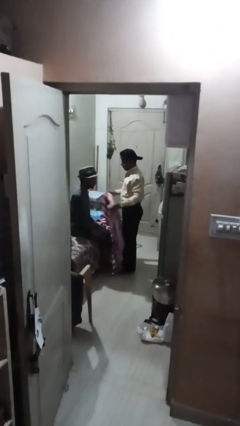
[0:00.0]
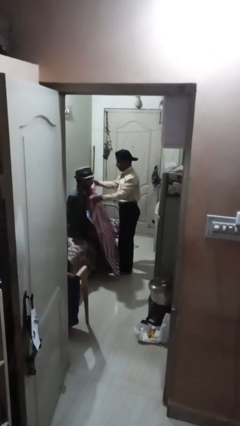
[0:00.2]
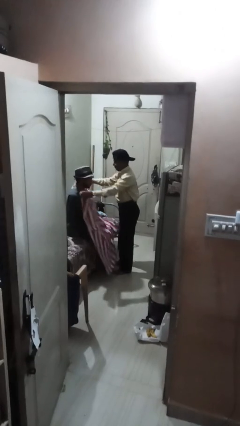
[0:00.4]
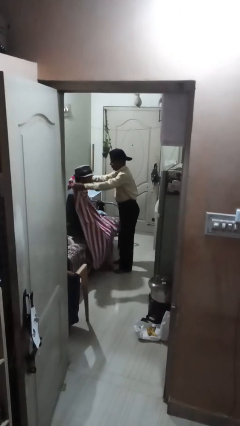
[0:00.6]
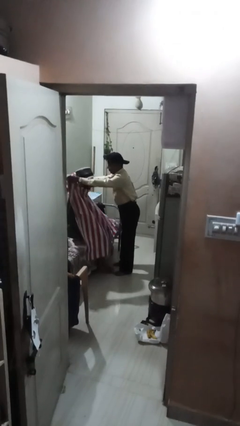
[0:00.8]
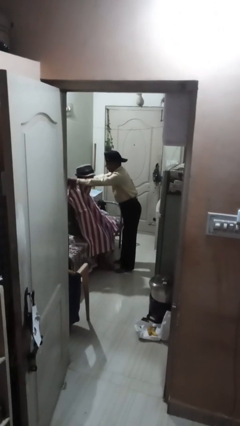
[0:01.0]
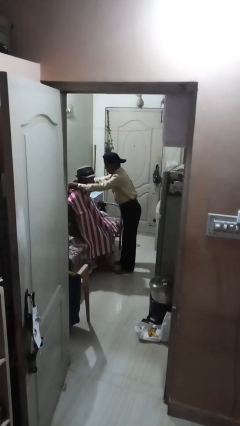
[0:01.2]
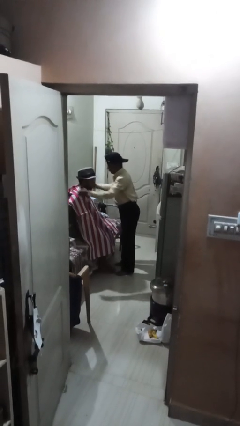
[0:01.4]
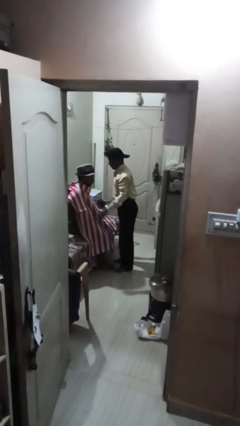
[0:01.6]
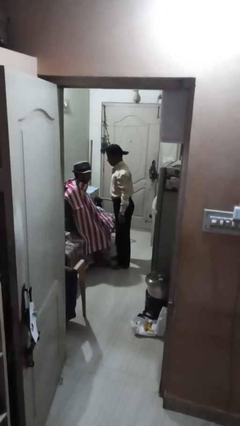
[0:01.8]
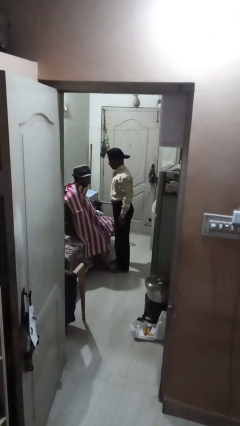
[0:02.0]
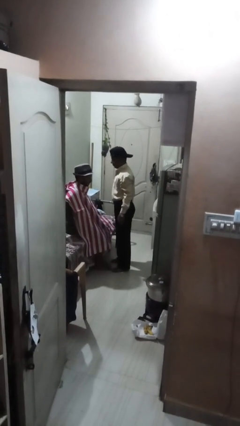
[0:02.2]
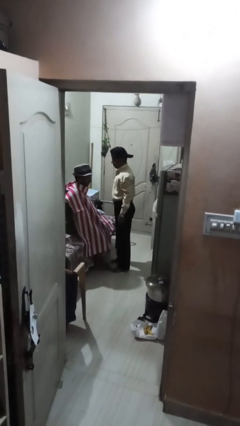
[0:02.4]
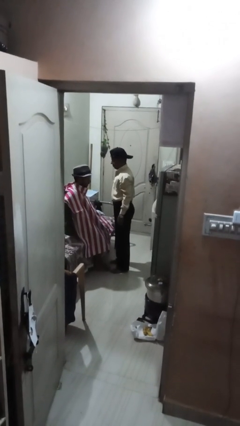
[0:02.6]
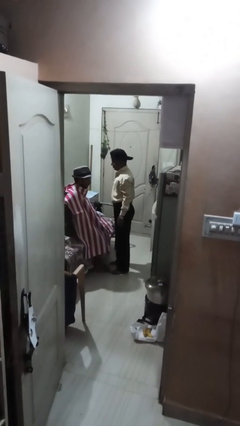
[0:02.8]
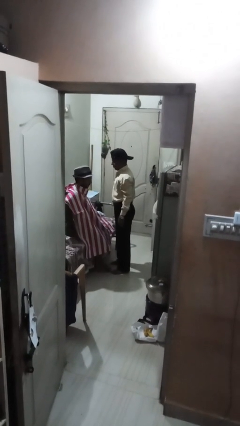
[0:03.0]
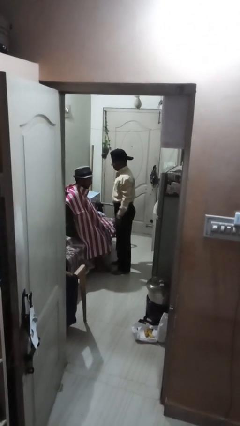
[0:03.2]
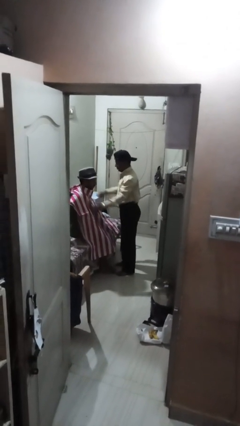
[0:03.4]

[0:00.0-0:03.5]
person covers friend with blanket

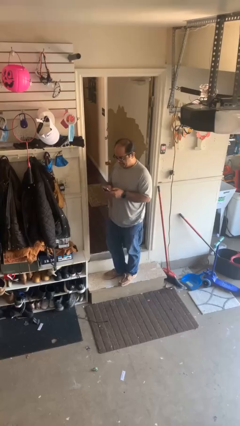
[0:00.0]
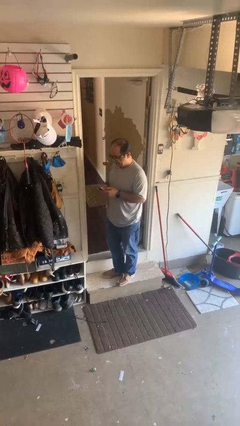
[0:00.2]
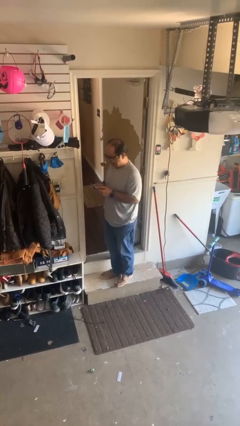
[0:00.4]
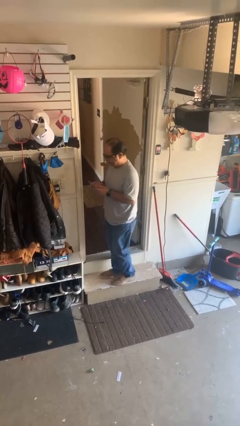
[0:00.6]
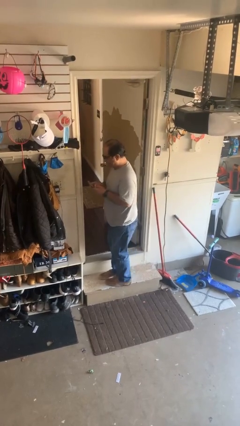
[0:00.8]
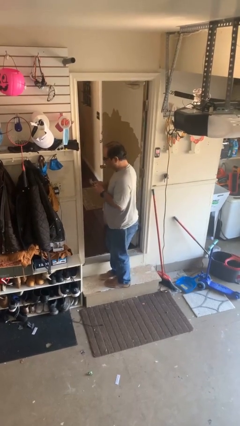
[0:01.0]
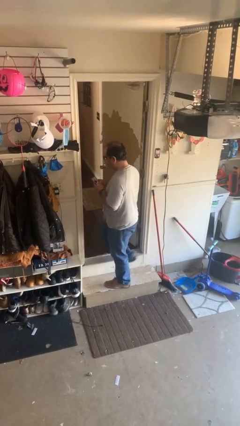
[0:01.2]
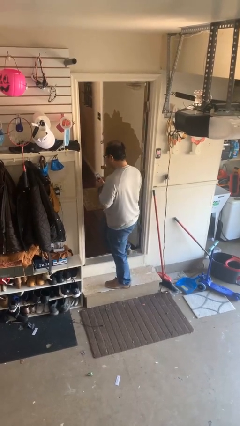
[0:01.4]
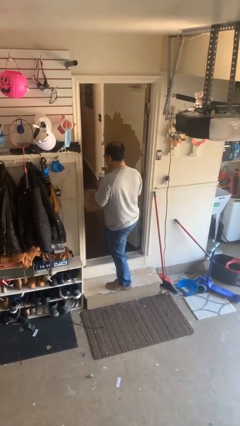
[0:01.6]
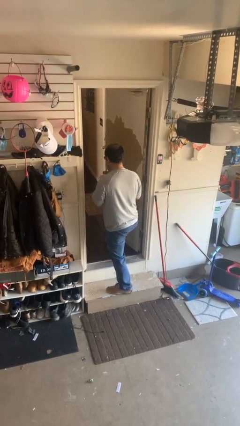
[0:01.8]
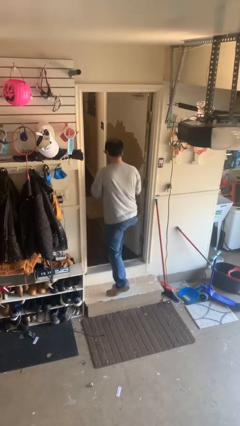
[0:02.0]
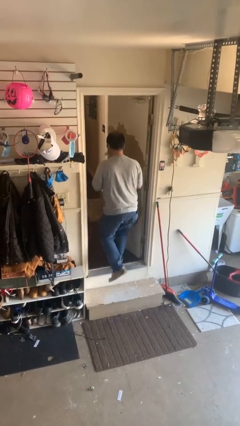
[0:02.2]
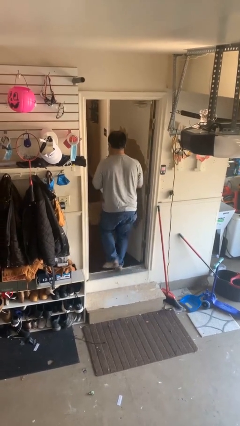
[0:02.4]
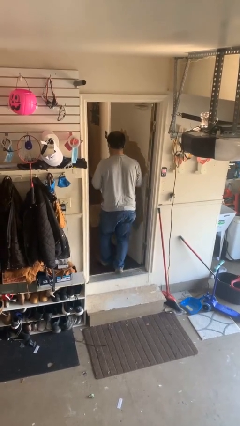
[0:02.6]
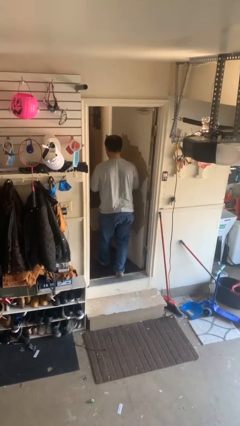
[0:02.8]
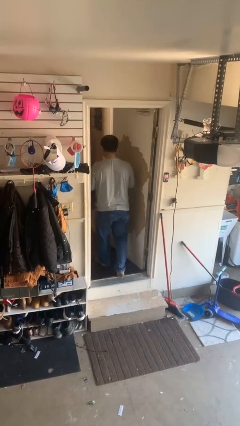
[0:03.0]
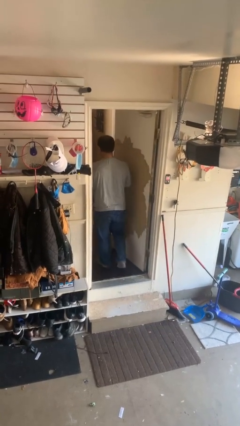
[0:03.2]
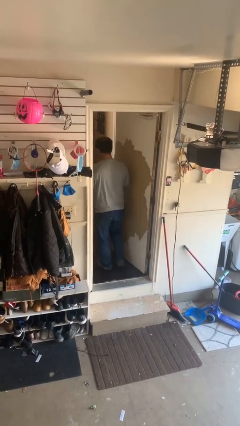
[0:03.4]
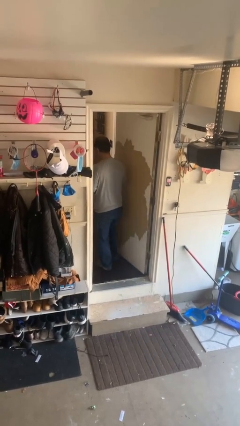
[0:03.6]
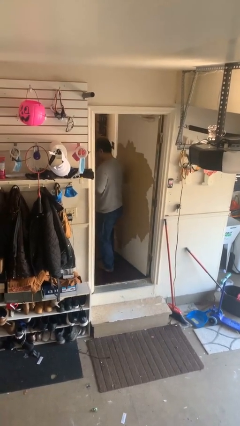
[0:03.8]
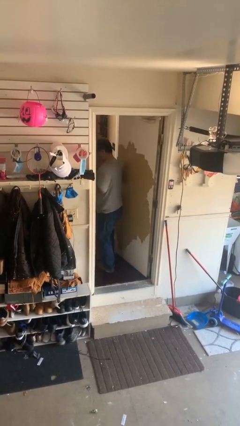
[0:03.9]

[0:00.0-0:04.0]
person exits scene through structure

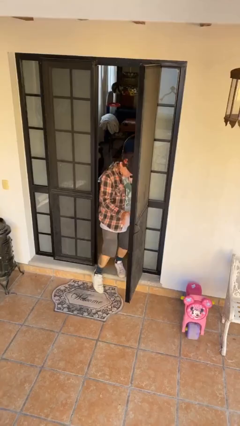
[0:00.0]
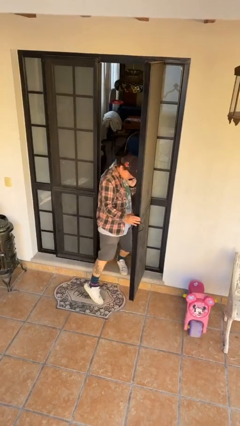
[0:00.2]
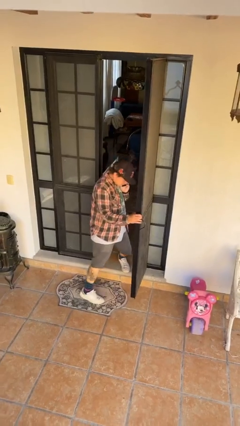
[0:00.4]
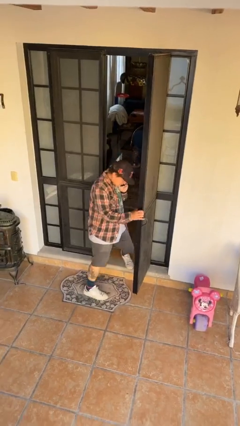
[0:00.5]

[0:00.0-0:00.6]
person enters scene through structure

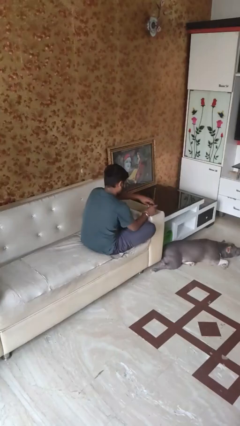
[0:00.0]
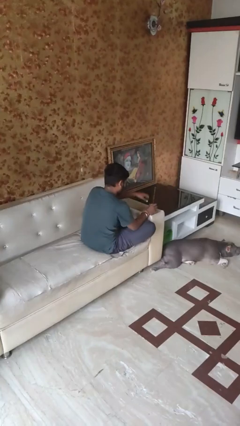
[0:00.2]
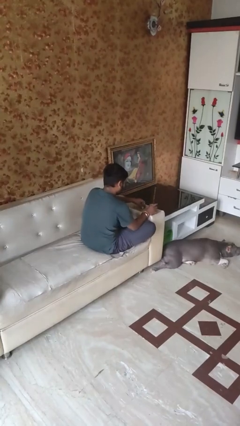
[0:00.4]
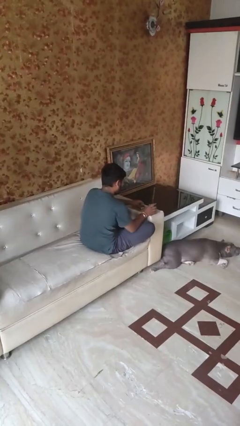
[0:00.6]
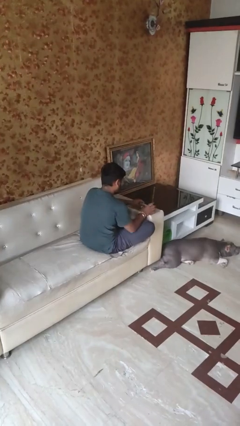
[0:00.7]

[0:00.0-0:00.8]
person opens jar

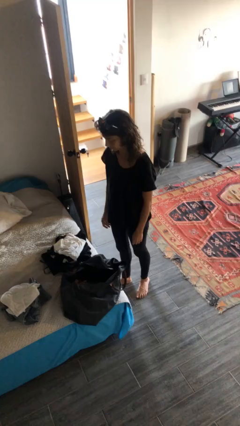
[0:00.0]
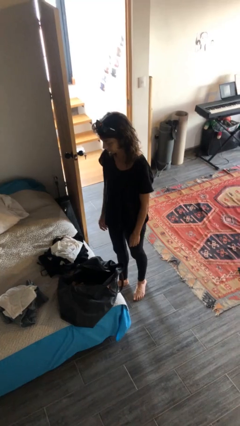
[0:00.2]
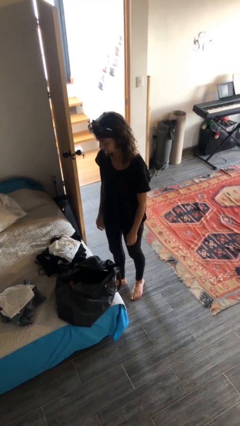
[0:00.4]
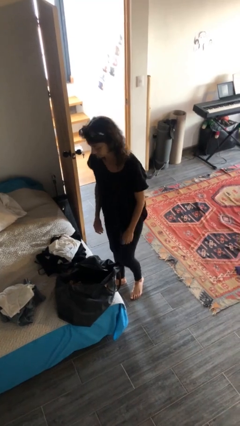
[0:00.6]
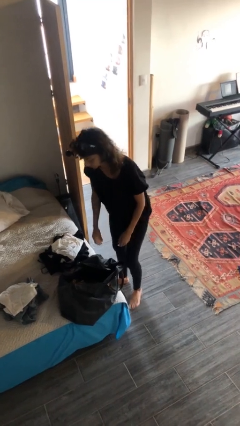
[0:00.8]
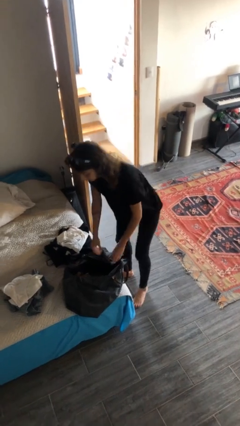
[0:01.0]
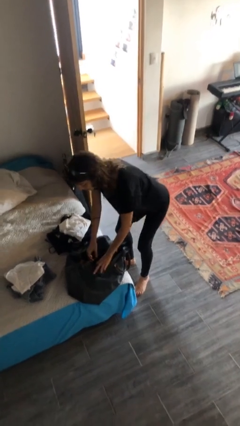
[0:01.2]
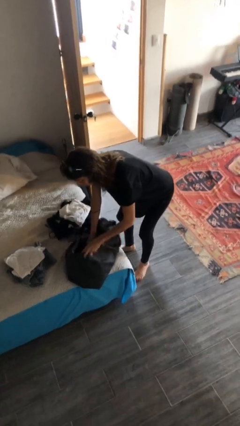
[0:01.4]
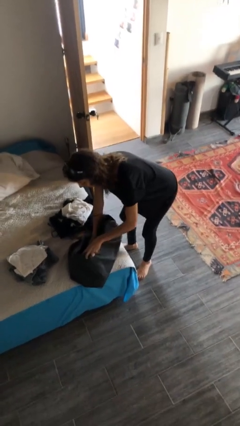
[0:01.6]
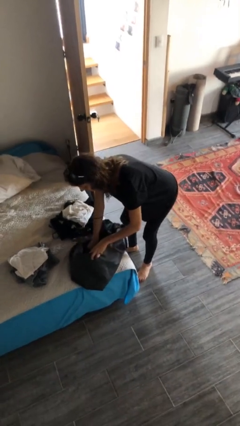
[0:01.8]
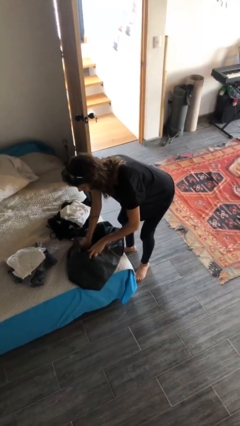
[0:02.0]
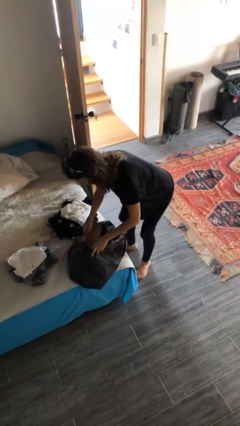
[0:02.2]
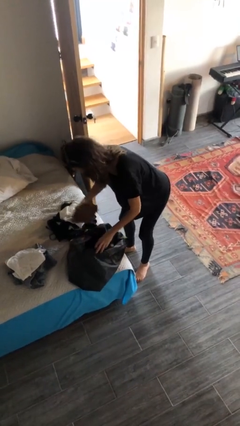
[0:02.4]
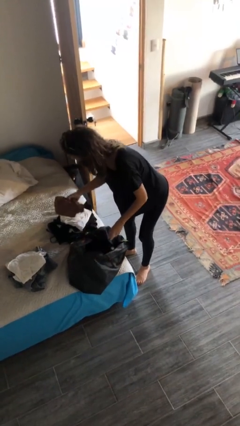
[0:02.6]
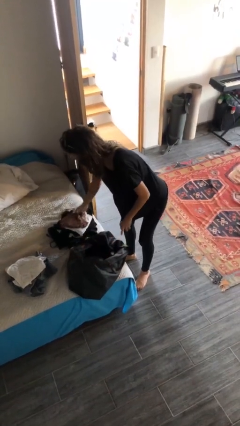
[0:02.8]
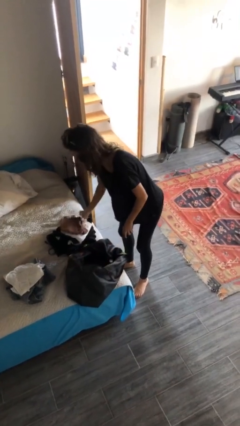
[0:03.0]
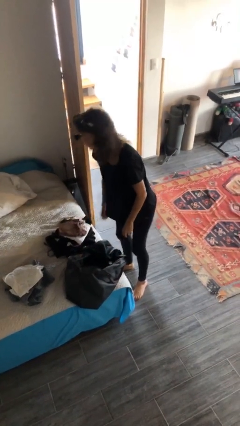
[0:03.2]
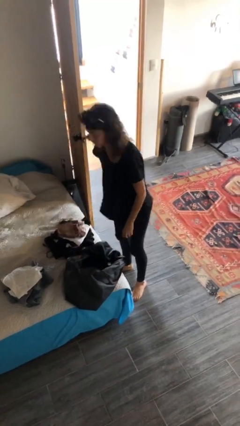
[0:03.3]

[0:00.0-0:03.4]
person unloads clothes from suitcase

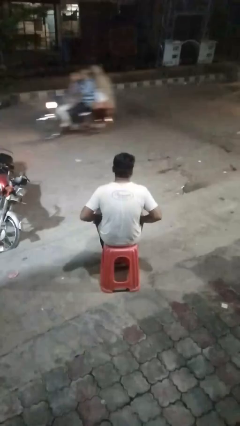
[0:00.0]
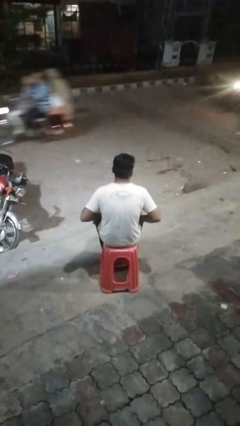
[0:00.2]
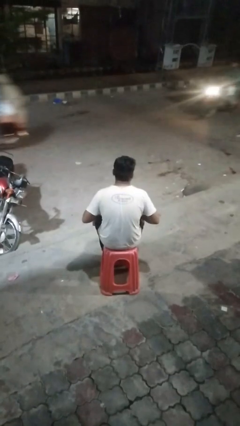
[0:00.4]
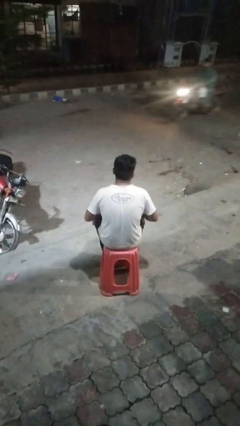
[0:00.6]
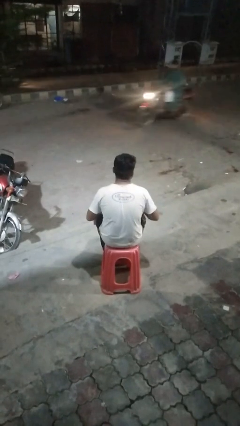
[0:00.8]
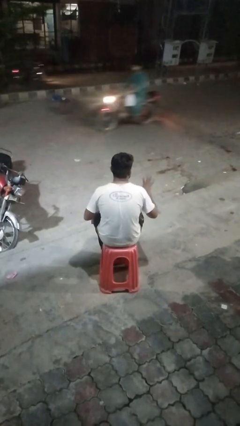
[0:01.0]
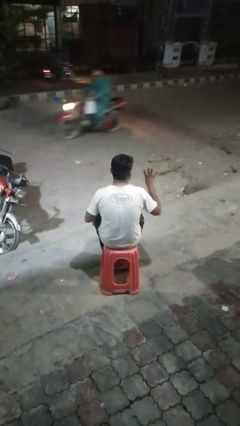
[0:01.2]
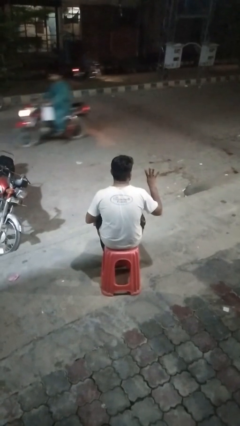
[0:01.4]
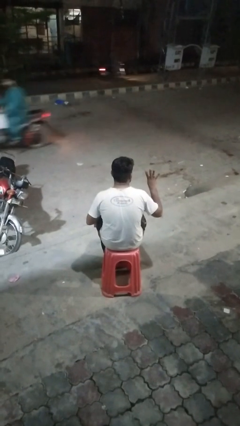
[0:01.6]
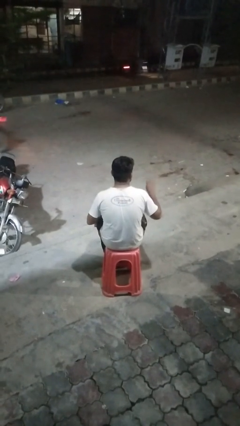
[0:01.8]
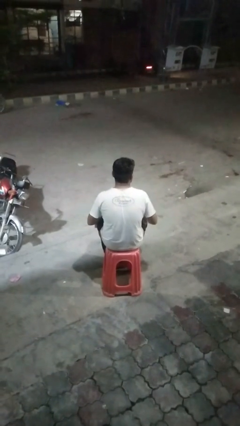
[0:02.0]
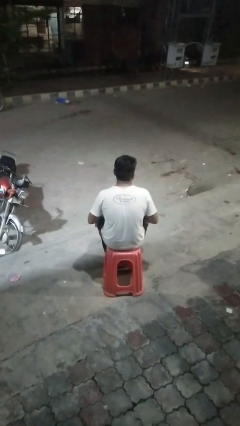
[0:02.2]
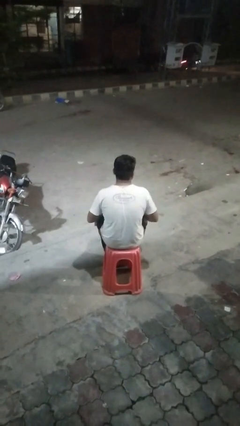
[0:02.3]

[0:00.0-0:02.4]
person gestures number four

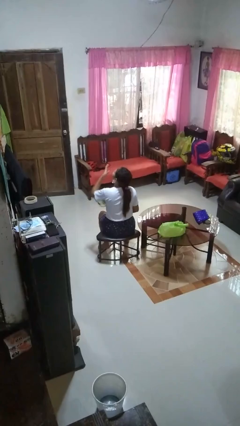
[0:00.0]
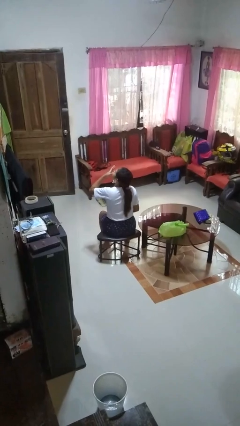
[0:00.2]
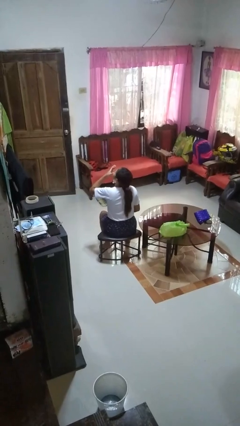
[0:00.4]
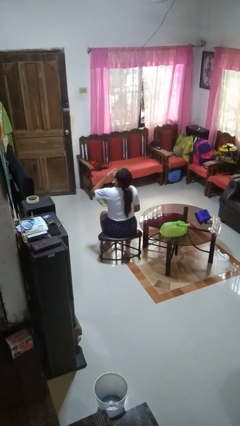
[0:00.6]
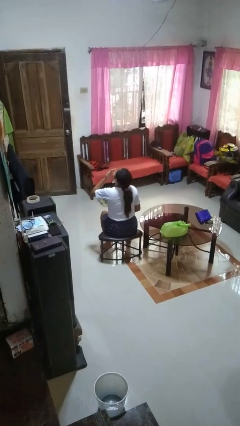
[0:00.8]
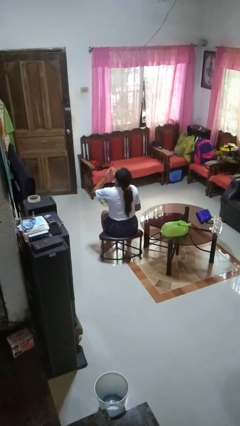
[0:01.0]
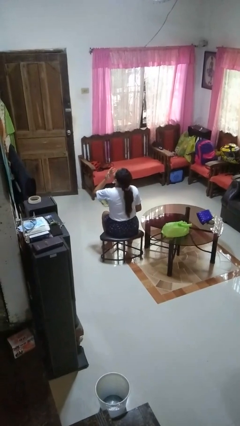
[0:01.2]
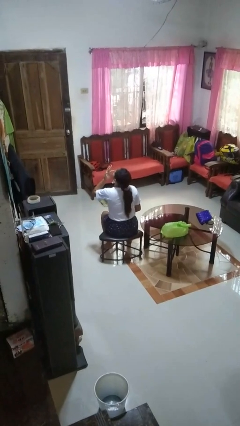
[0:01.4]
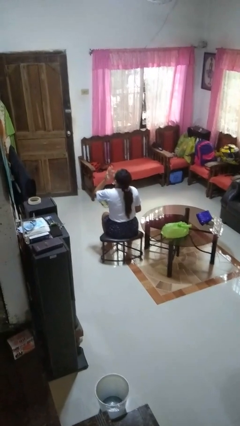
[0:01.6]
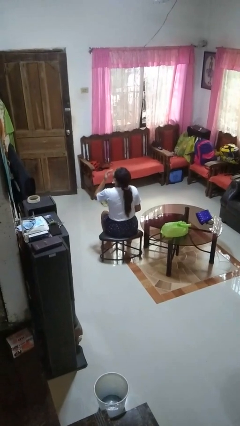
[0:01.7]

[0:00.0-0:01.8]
person licks fingers

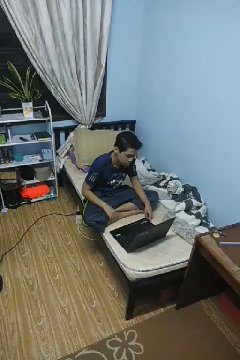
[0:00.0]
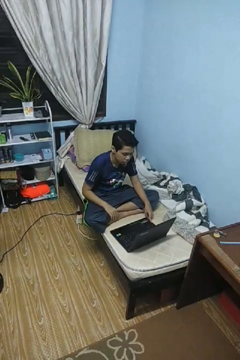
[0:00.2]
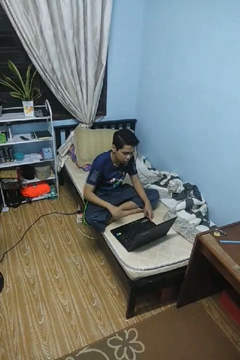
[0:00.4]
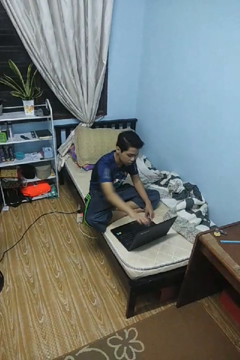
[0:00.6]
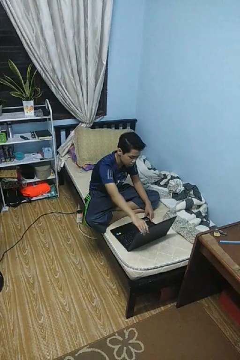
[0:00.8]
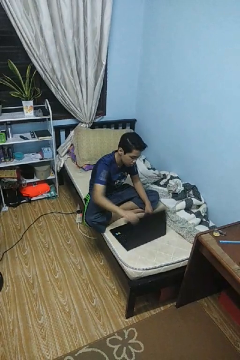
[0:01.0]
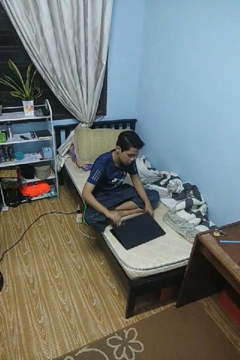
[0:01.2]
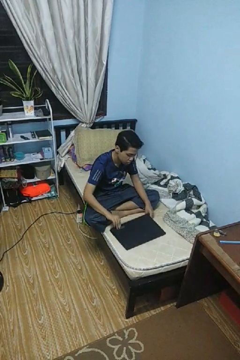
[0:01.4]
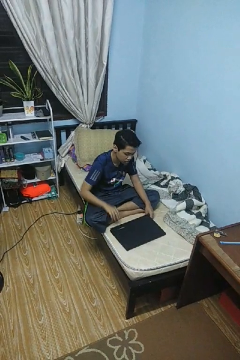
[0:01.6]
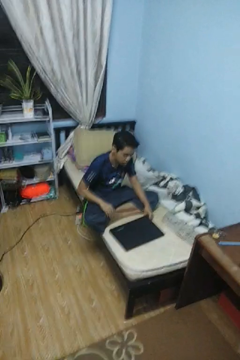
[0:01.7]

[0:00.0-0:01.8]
person closes laptop
